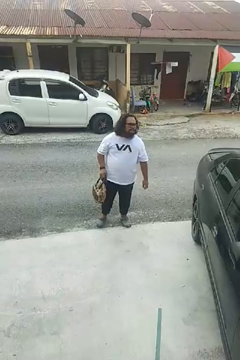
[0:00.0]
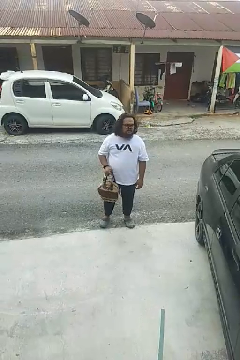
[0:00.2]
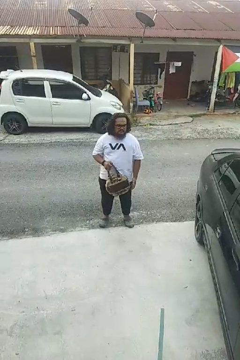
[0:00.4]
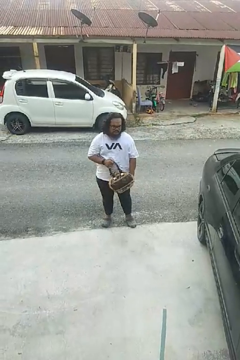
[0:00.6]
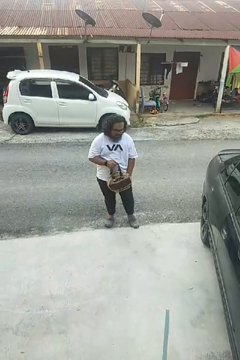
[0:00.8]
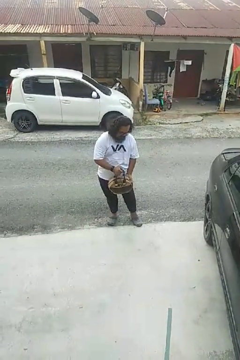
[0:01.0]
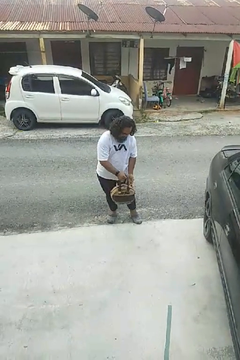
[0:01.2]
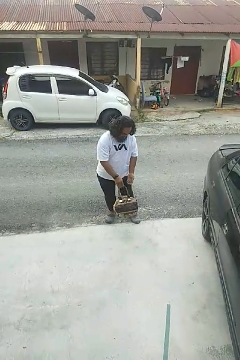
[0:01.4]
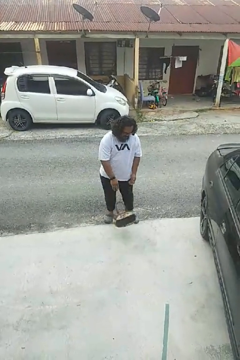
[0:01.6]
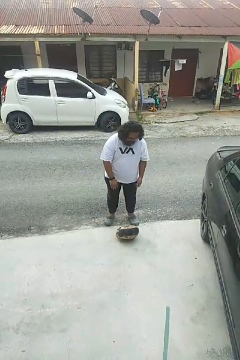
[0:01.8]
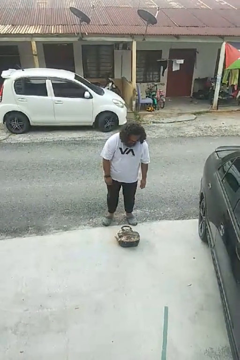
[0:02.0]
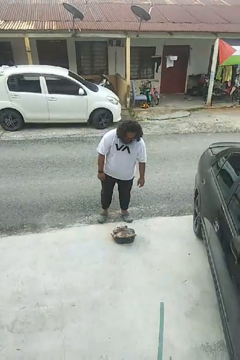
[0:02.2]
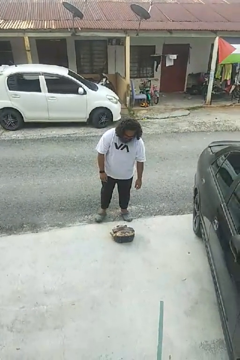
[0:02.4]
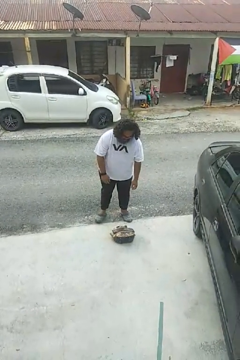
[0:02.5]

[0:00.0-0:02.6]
person drops object

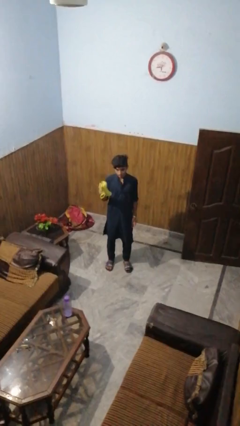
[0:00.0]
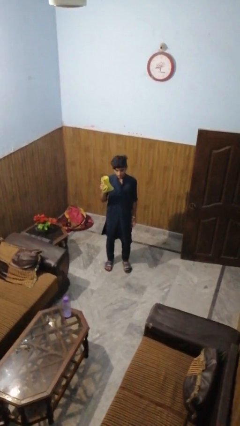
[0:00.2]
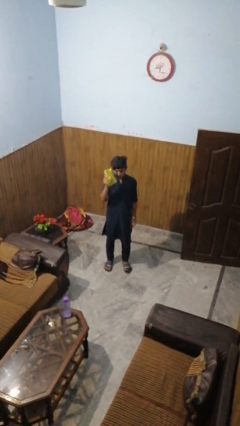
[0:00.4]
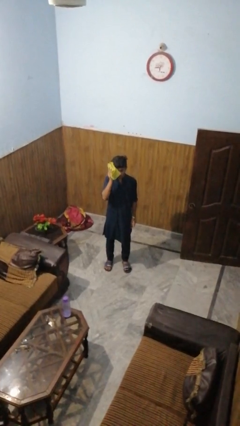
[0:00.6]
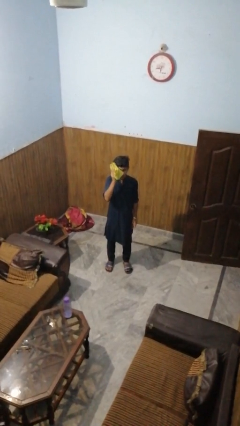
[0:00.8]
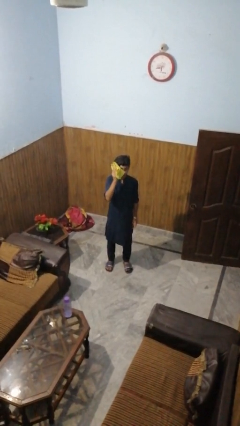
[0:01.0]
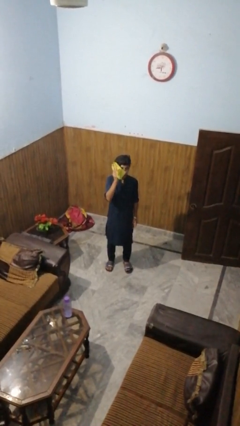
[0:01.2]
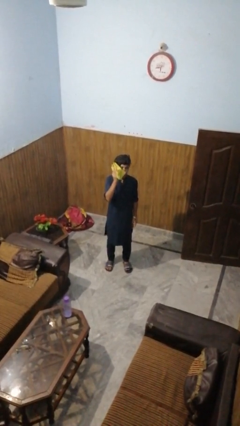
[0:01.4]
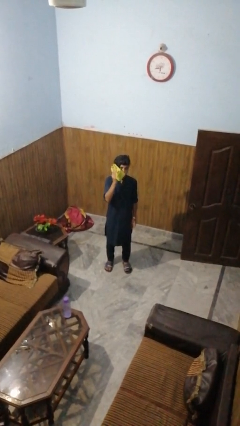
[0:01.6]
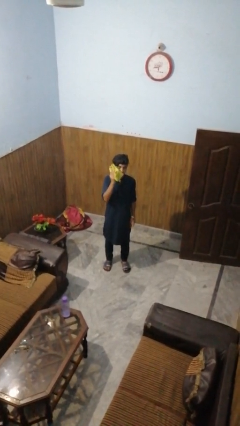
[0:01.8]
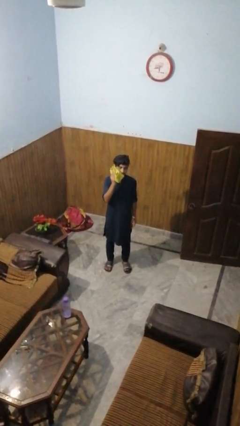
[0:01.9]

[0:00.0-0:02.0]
person wipes mouth with napkin

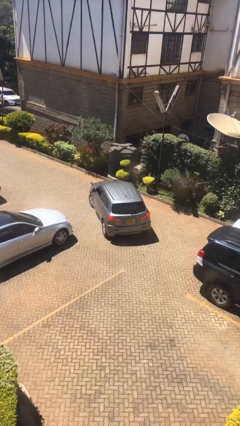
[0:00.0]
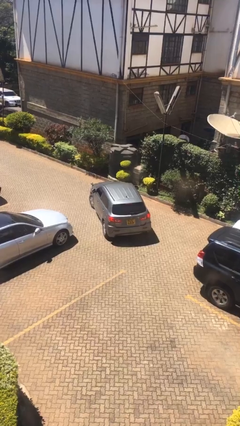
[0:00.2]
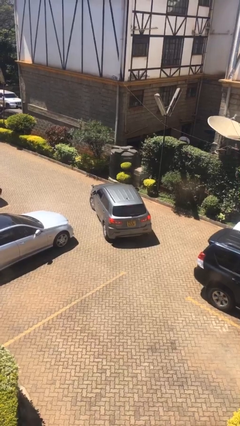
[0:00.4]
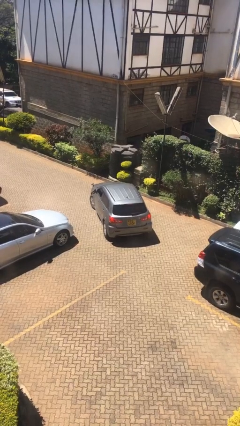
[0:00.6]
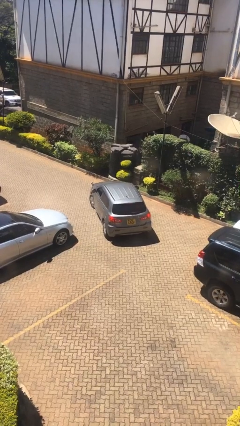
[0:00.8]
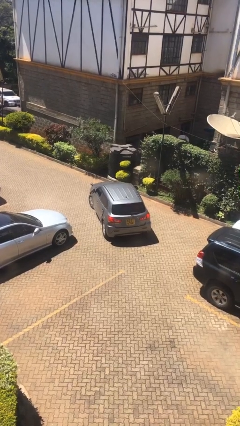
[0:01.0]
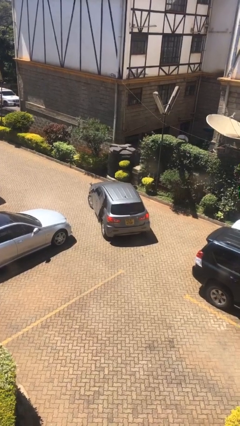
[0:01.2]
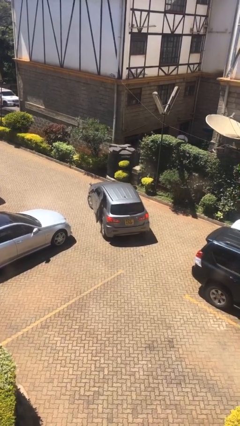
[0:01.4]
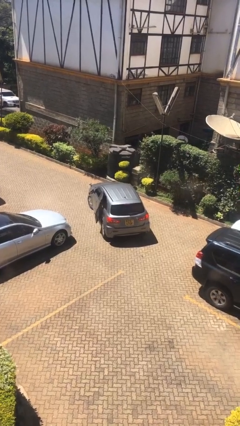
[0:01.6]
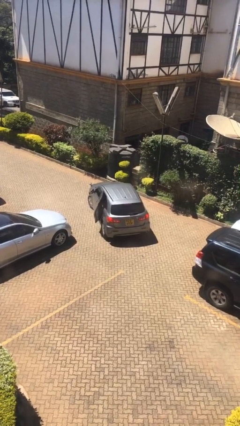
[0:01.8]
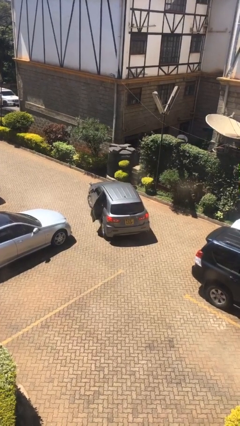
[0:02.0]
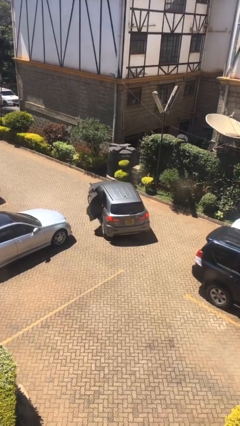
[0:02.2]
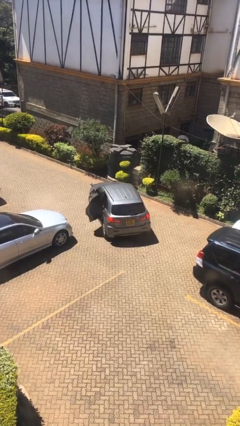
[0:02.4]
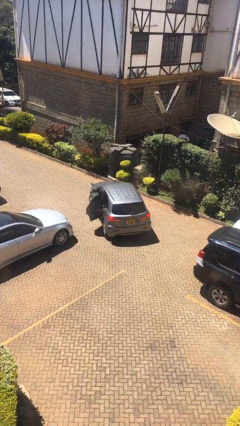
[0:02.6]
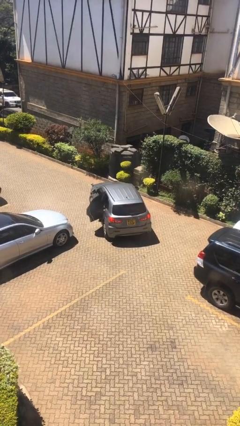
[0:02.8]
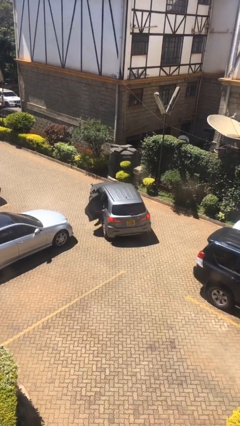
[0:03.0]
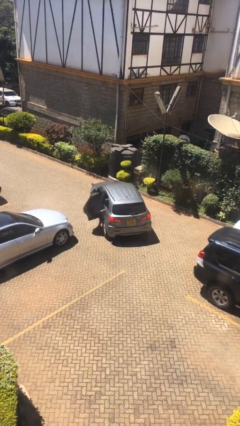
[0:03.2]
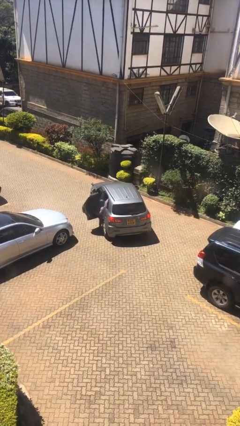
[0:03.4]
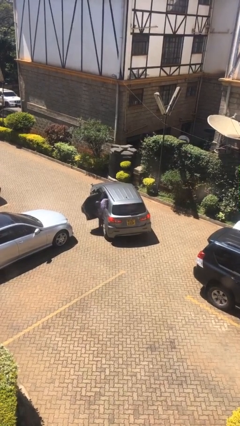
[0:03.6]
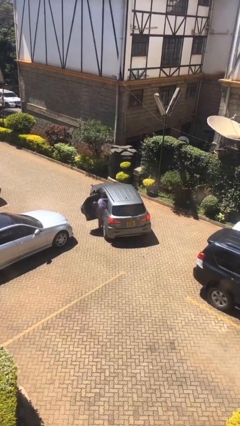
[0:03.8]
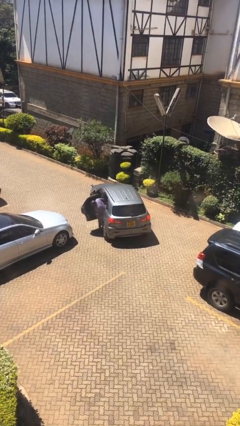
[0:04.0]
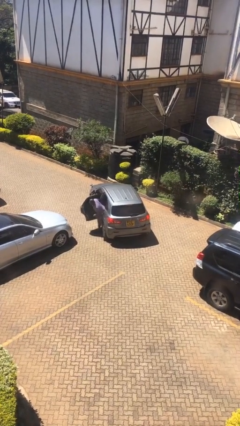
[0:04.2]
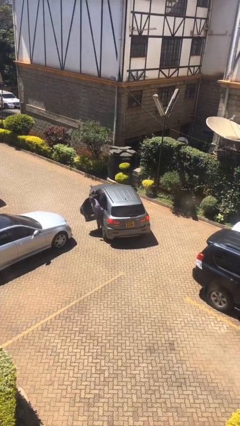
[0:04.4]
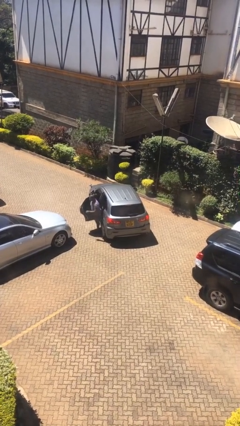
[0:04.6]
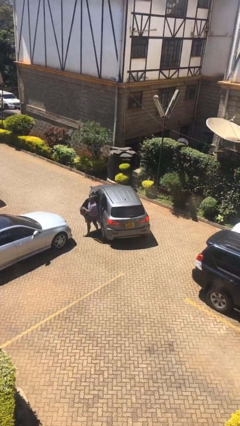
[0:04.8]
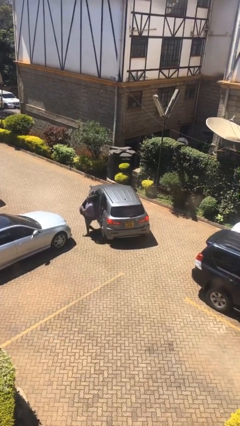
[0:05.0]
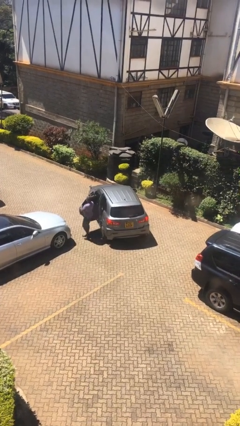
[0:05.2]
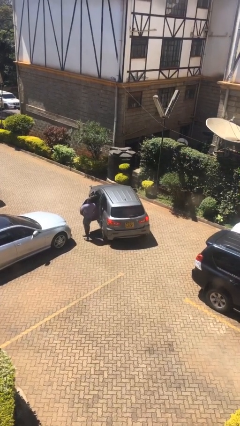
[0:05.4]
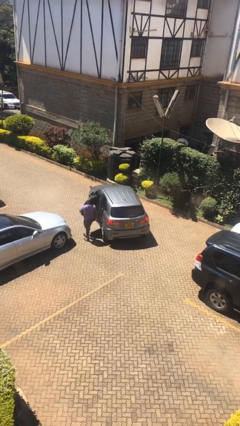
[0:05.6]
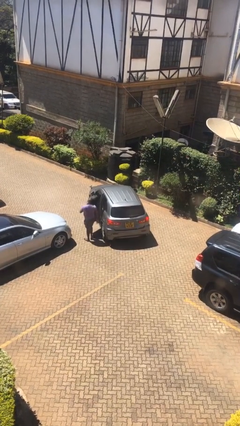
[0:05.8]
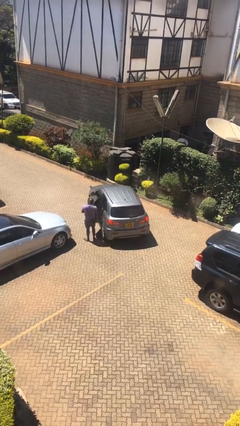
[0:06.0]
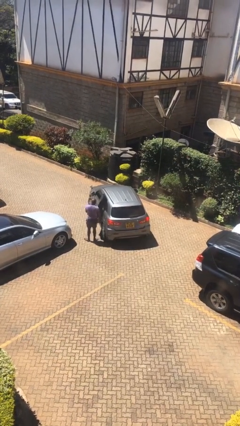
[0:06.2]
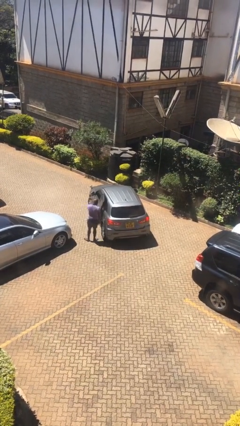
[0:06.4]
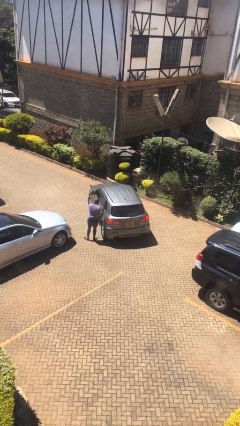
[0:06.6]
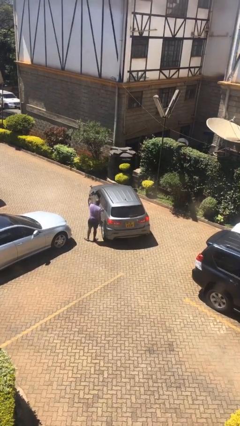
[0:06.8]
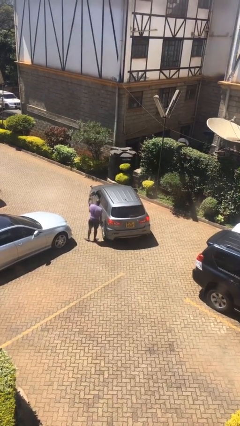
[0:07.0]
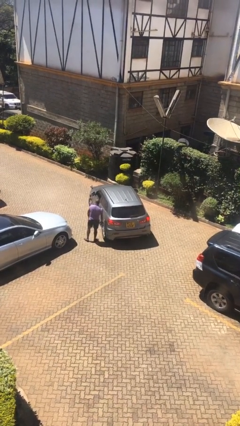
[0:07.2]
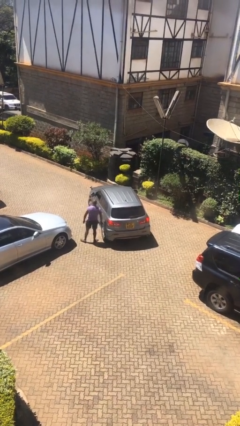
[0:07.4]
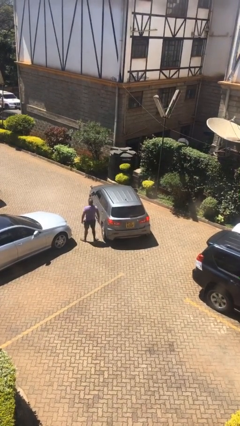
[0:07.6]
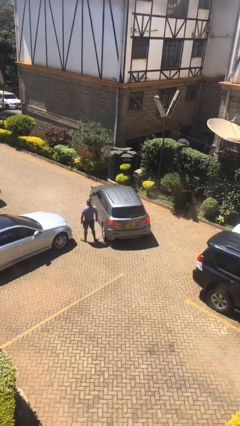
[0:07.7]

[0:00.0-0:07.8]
car drops off person

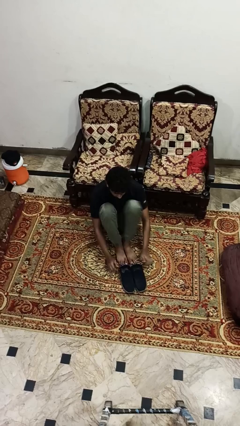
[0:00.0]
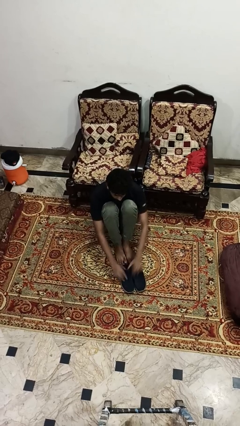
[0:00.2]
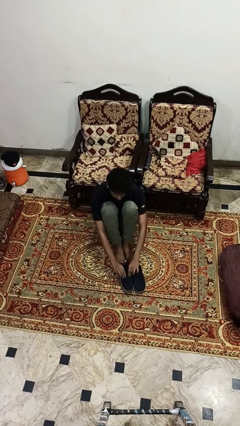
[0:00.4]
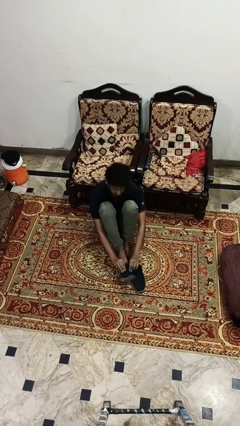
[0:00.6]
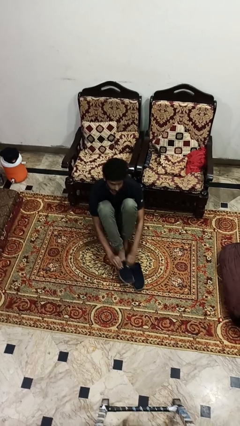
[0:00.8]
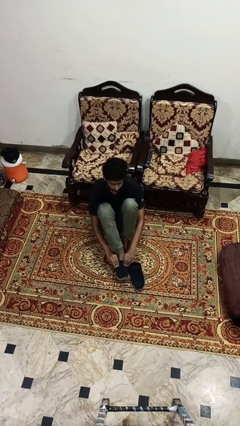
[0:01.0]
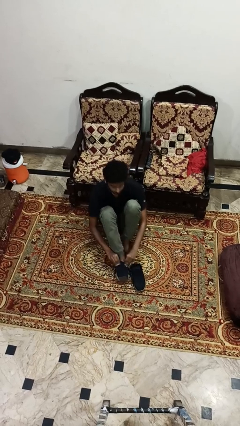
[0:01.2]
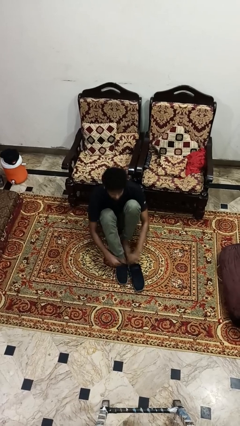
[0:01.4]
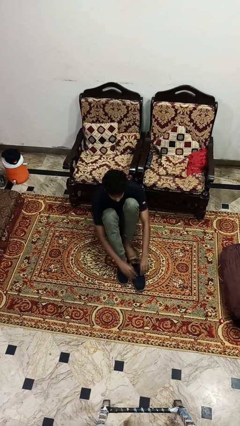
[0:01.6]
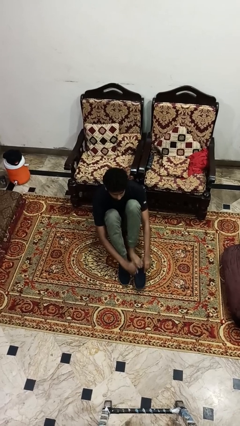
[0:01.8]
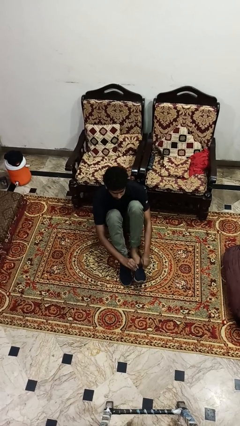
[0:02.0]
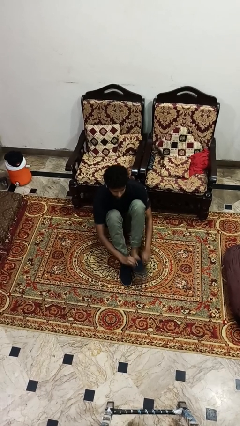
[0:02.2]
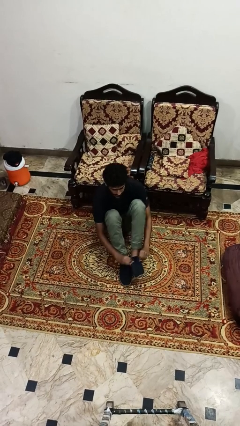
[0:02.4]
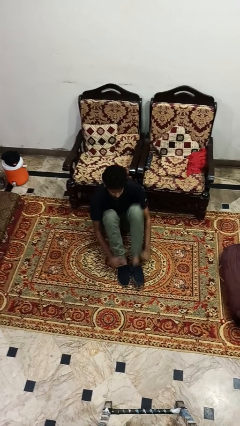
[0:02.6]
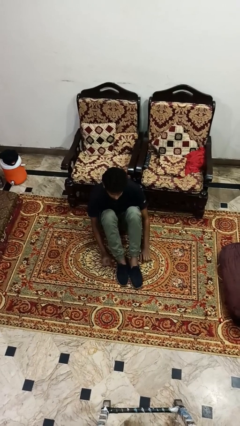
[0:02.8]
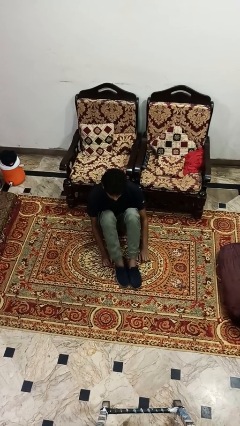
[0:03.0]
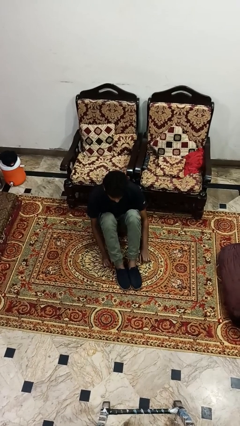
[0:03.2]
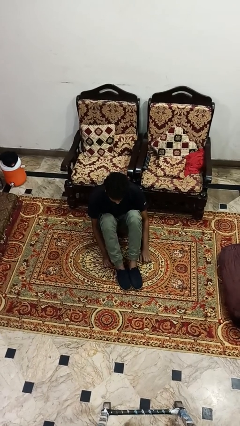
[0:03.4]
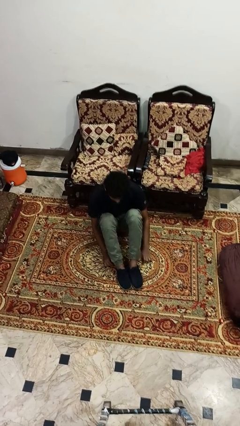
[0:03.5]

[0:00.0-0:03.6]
person puts on shoes

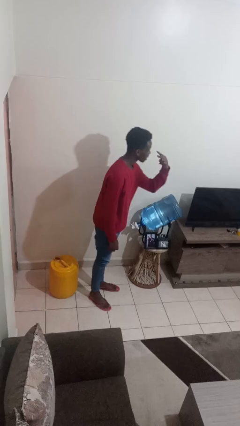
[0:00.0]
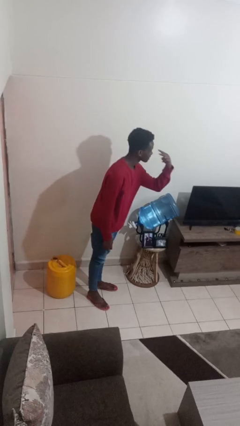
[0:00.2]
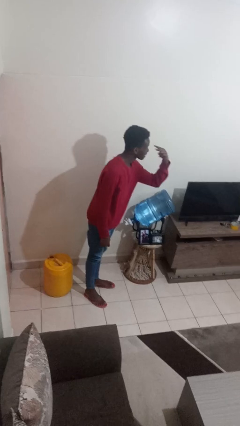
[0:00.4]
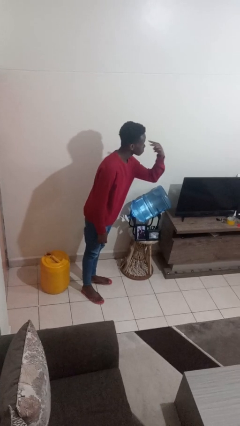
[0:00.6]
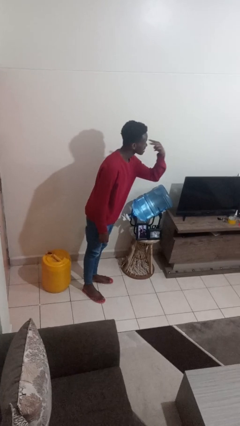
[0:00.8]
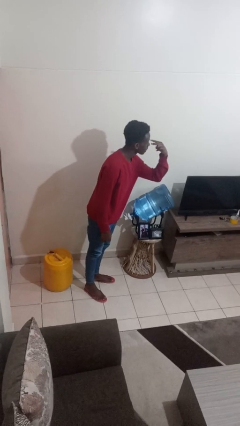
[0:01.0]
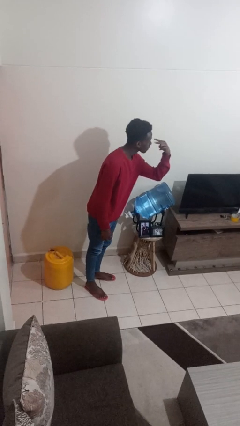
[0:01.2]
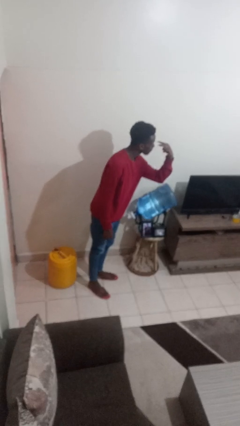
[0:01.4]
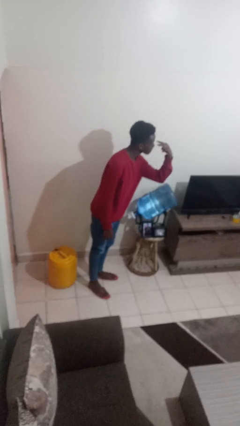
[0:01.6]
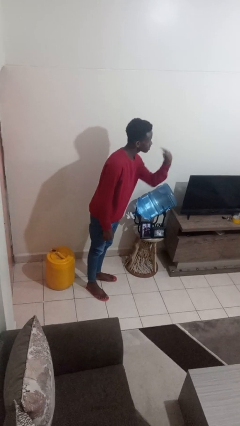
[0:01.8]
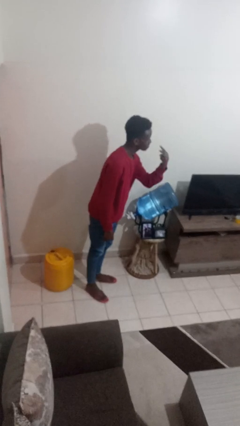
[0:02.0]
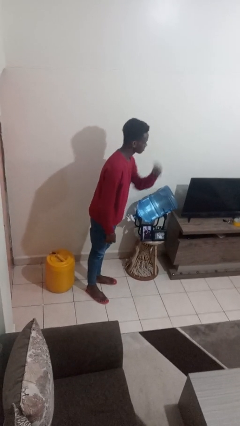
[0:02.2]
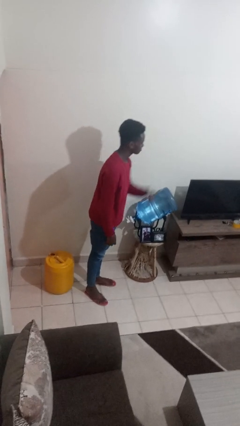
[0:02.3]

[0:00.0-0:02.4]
person gestures watch closely
